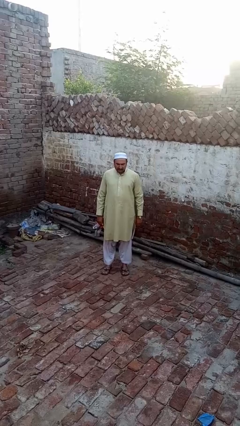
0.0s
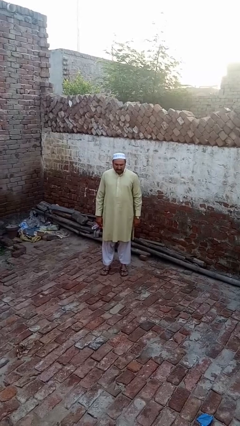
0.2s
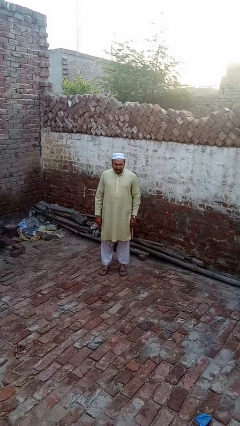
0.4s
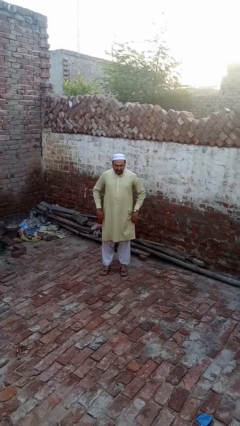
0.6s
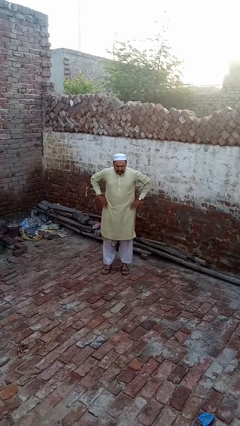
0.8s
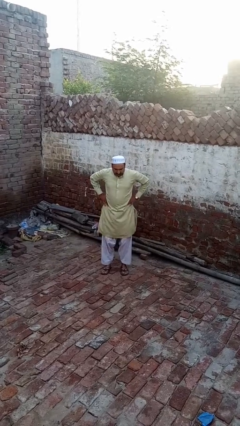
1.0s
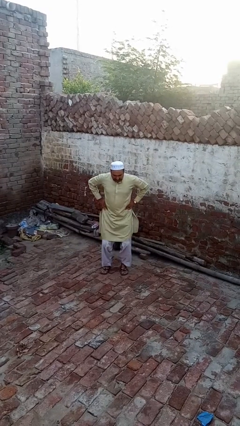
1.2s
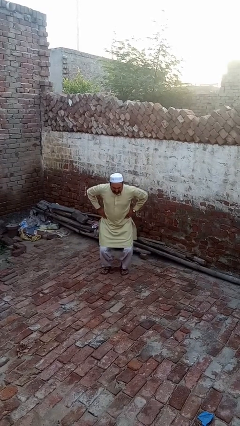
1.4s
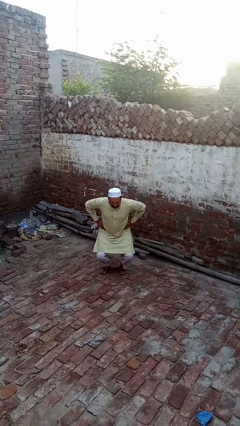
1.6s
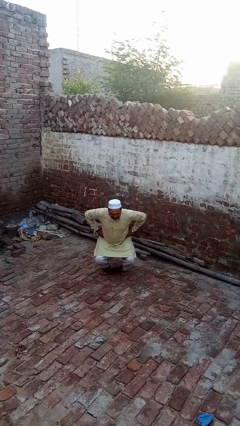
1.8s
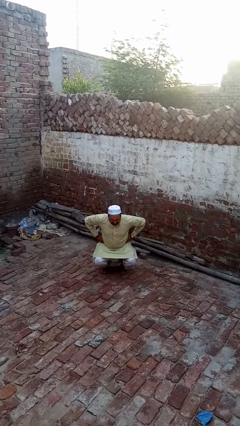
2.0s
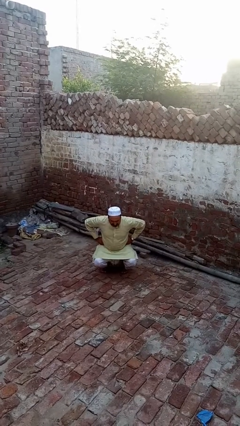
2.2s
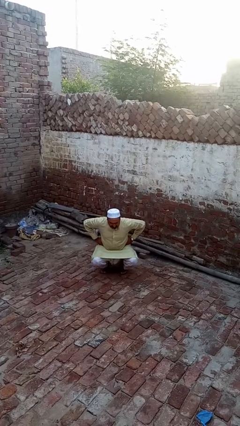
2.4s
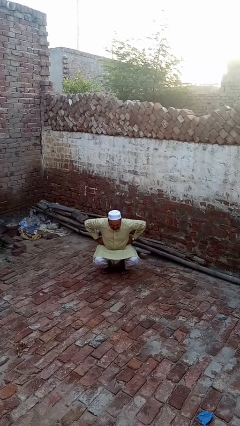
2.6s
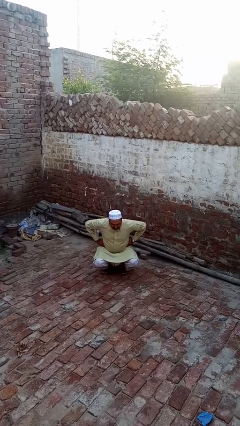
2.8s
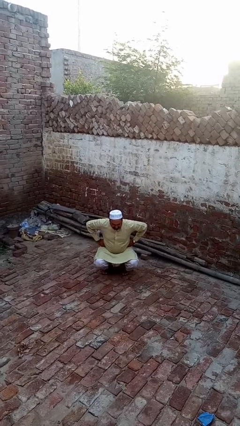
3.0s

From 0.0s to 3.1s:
person squats

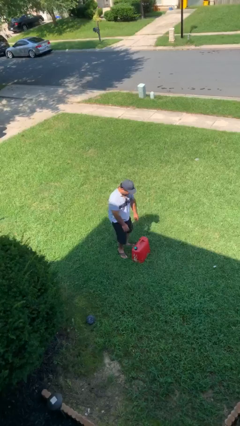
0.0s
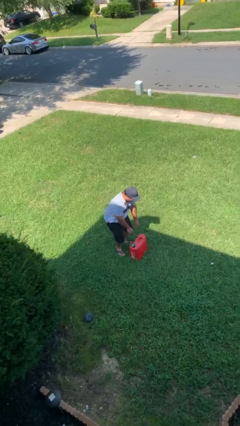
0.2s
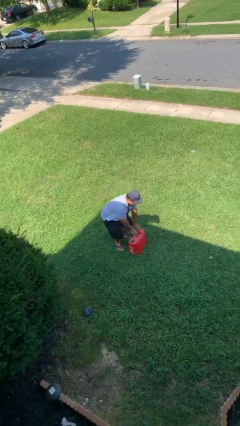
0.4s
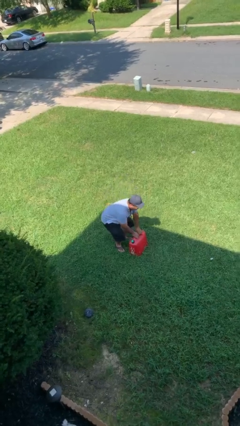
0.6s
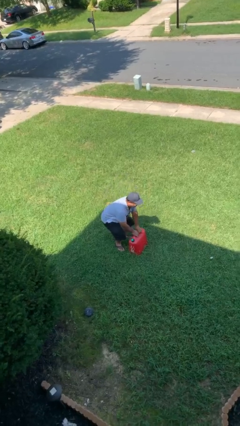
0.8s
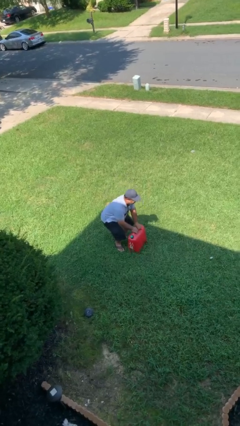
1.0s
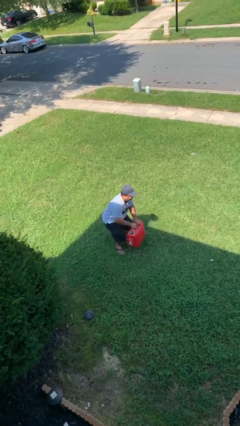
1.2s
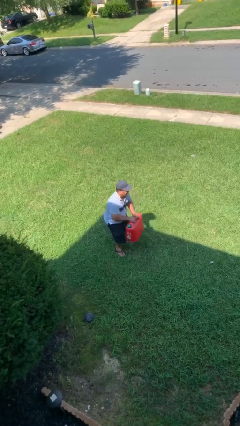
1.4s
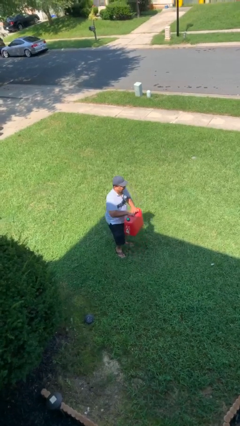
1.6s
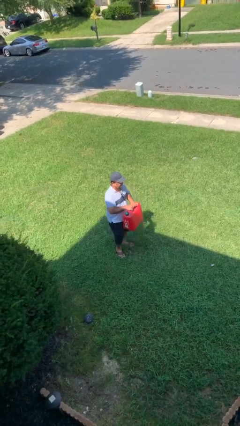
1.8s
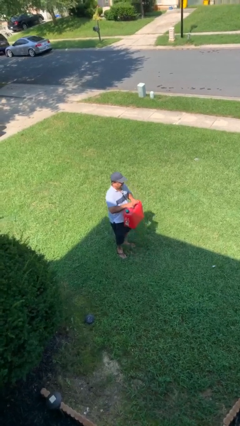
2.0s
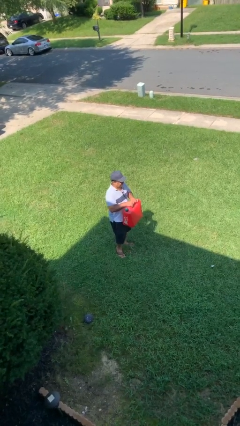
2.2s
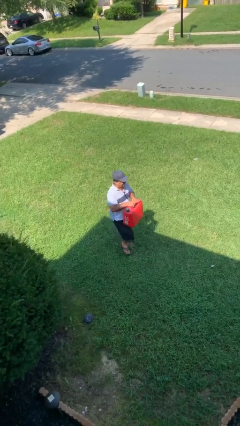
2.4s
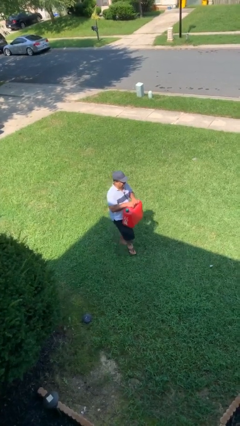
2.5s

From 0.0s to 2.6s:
person picks up object from floor

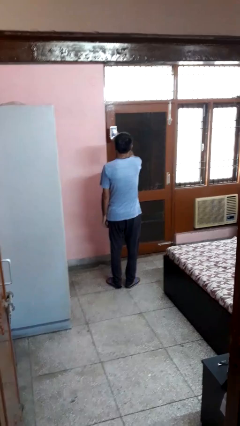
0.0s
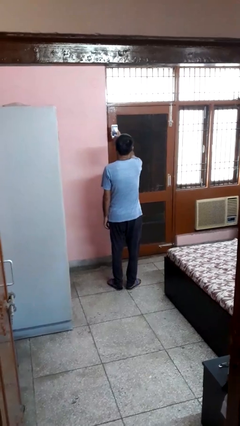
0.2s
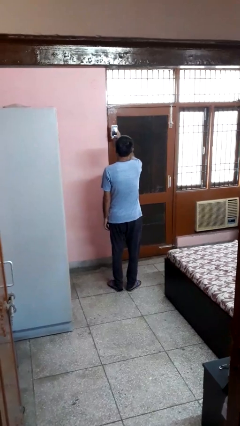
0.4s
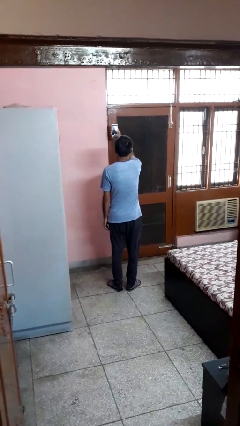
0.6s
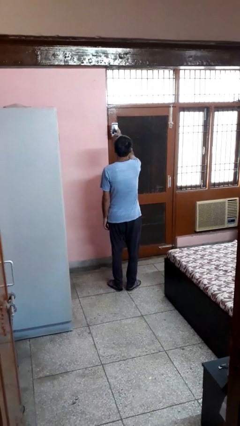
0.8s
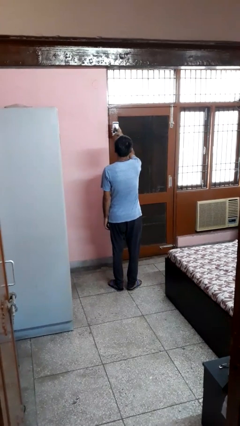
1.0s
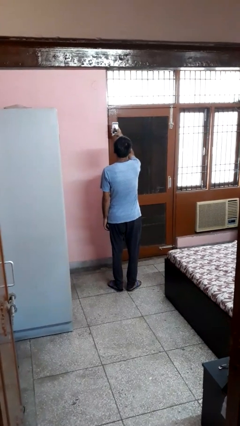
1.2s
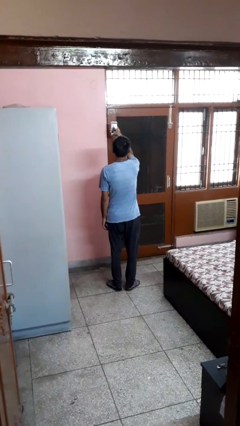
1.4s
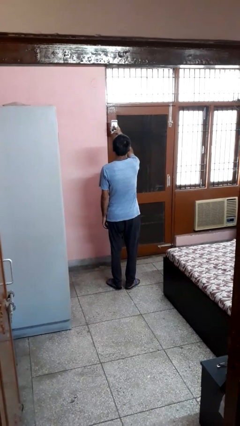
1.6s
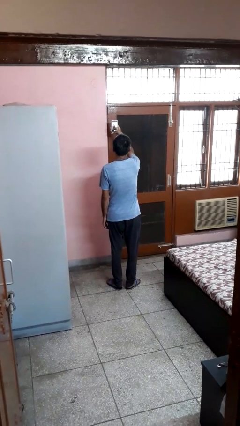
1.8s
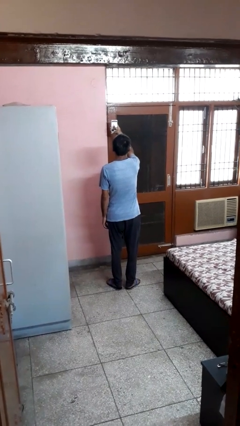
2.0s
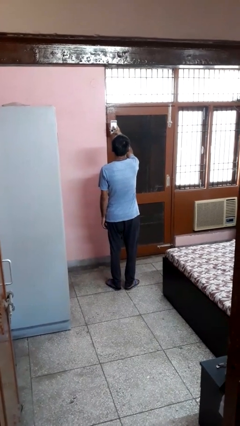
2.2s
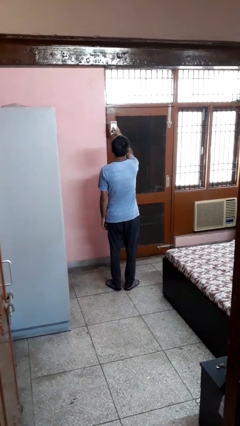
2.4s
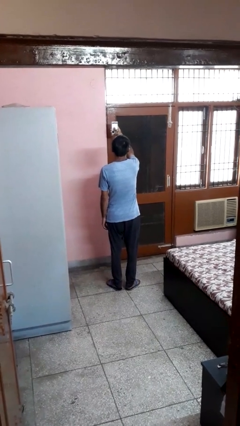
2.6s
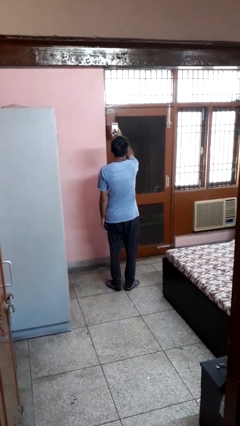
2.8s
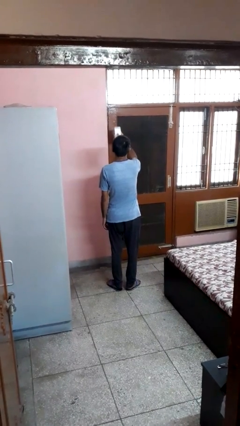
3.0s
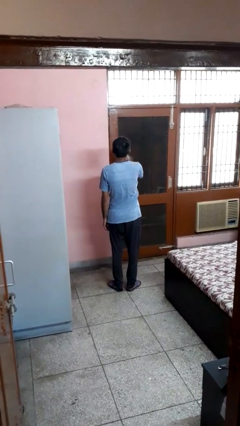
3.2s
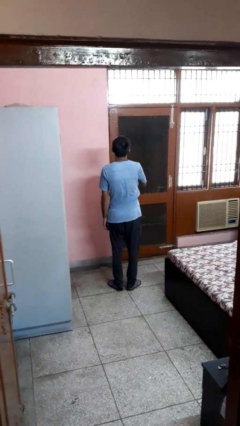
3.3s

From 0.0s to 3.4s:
person takes selfie

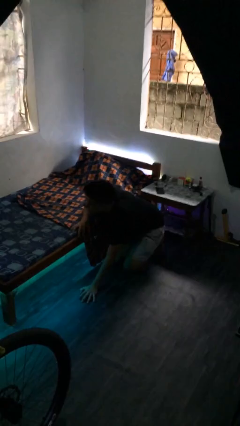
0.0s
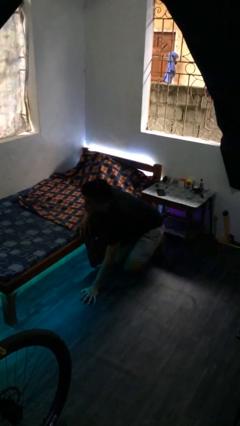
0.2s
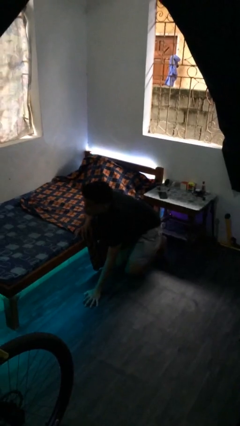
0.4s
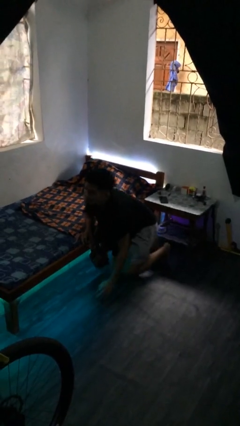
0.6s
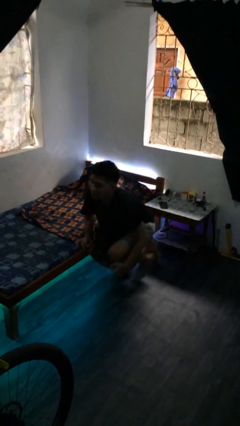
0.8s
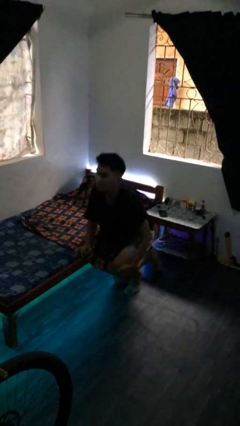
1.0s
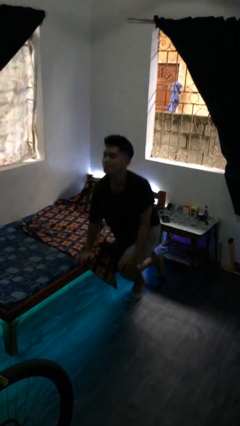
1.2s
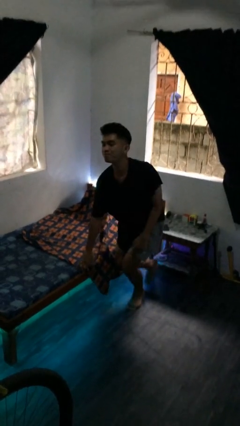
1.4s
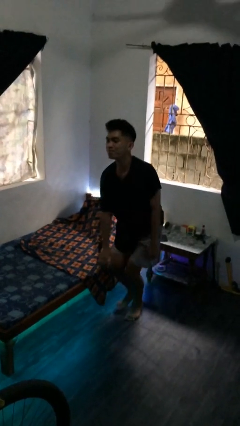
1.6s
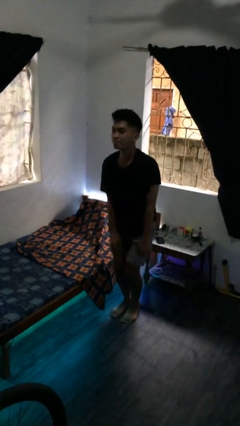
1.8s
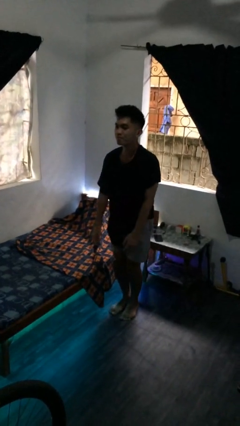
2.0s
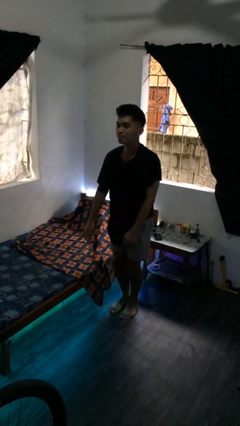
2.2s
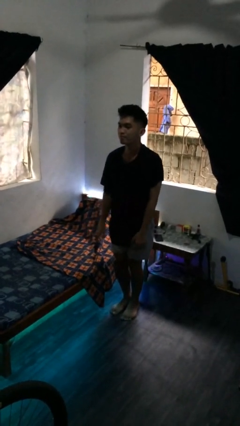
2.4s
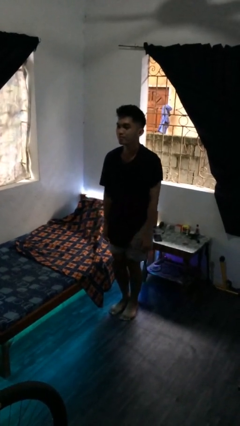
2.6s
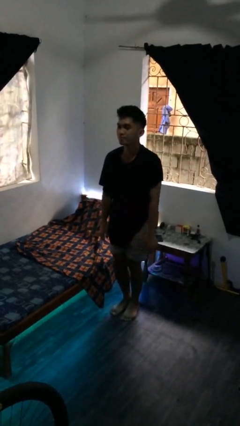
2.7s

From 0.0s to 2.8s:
person stands up from floor

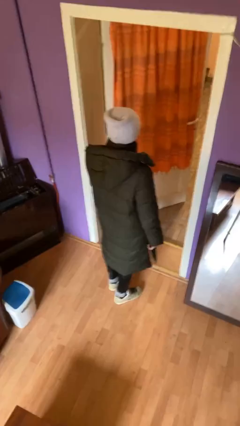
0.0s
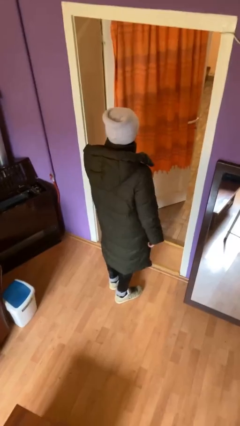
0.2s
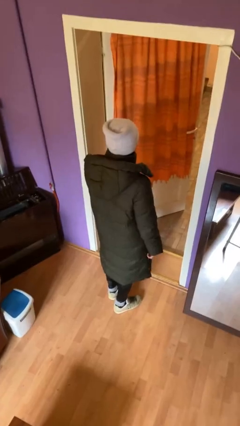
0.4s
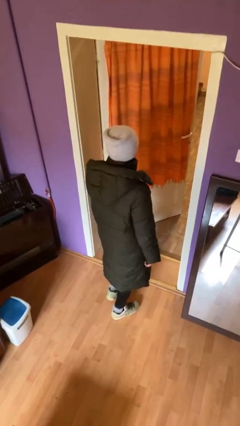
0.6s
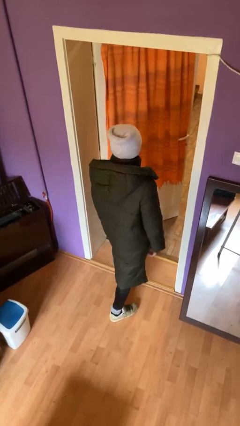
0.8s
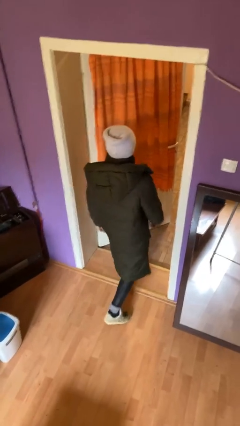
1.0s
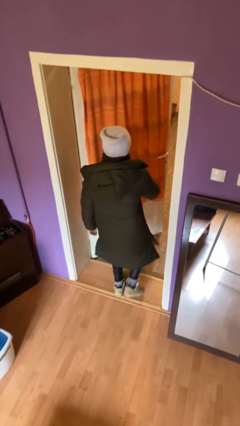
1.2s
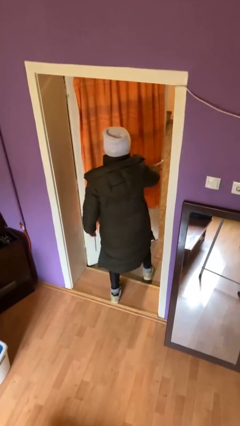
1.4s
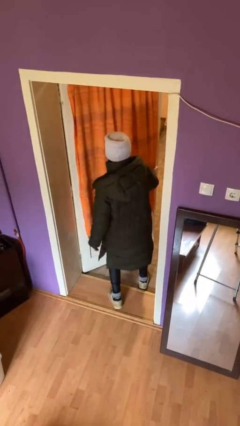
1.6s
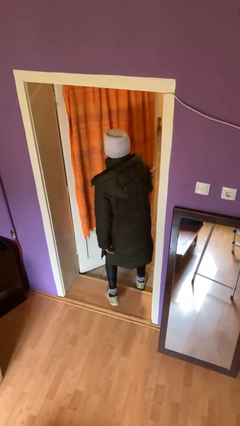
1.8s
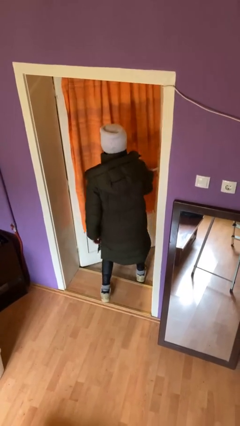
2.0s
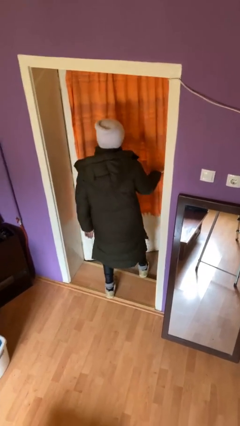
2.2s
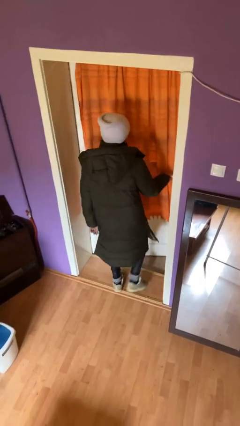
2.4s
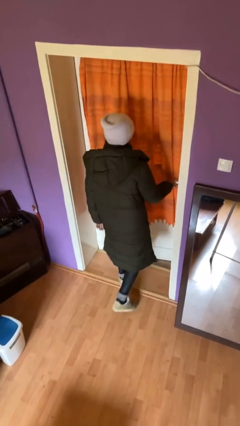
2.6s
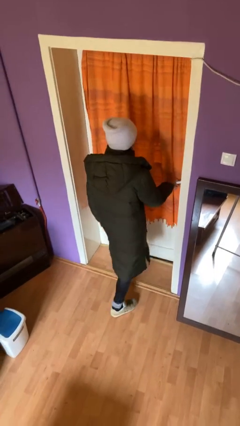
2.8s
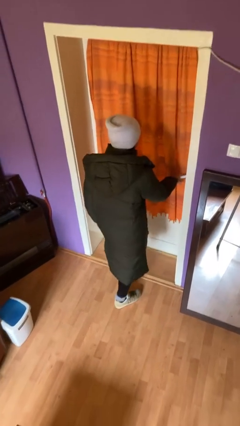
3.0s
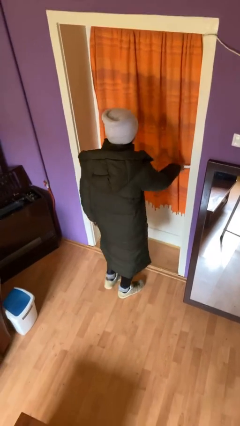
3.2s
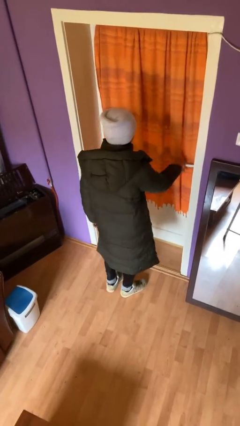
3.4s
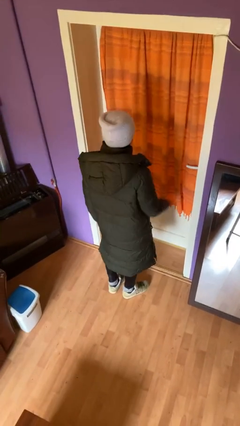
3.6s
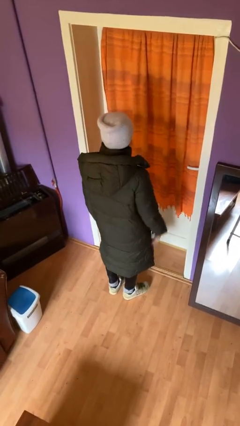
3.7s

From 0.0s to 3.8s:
person closes facility door

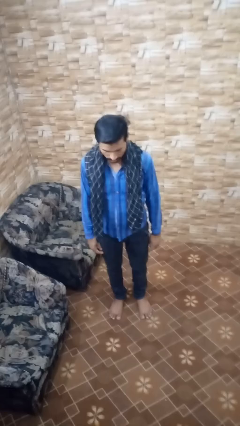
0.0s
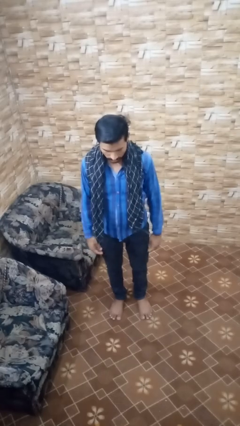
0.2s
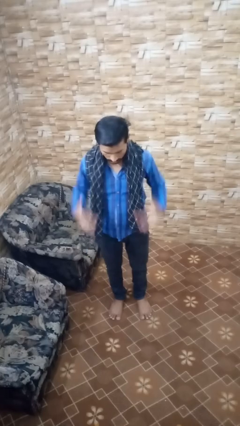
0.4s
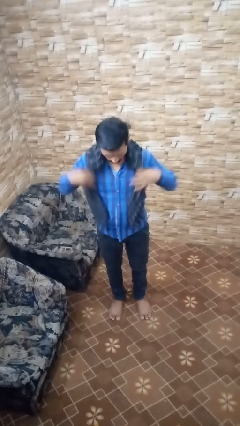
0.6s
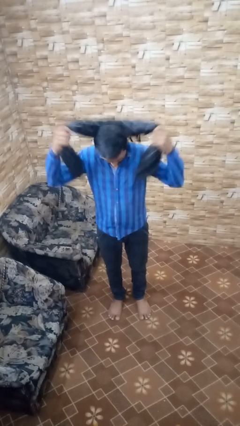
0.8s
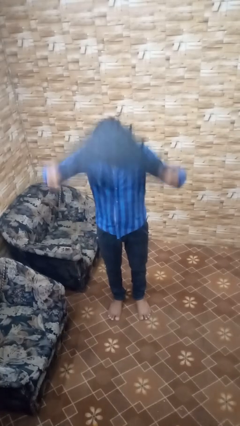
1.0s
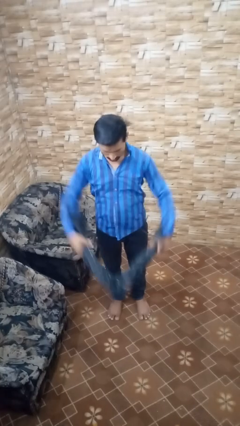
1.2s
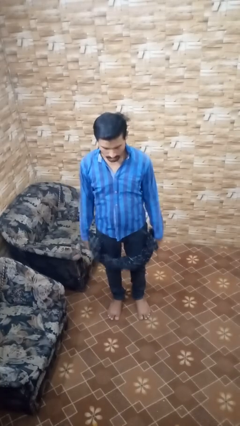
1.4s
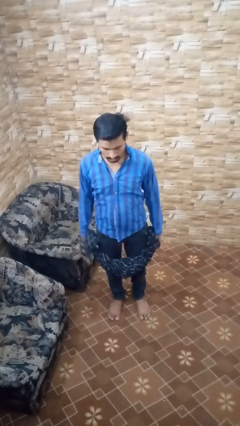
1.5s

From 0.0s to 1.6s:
person takes off scarf

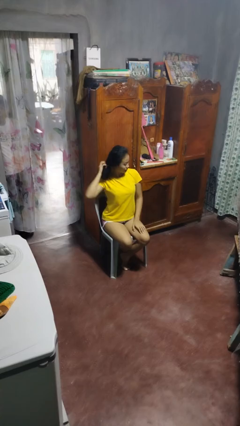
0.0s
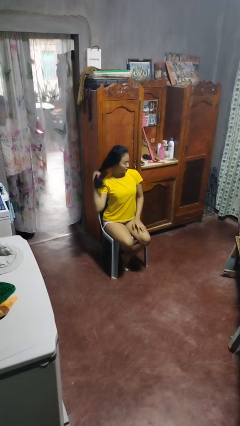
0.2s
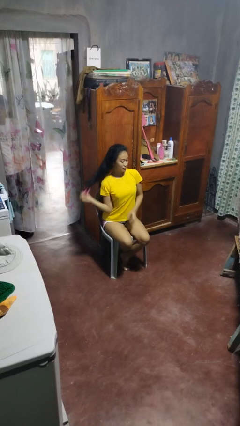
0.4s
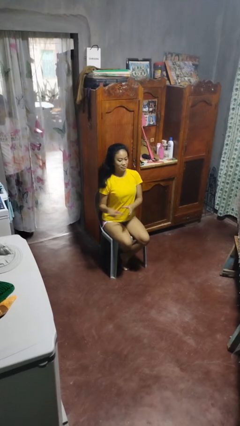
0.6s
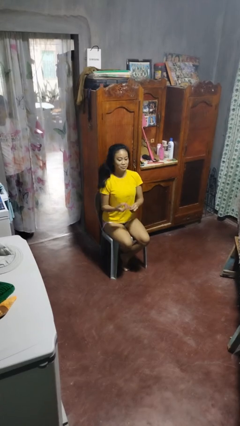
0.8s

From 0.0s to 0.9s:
person takes off hairtie
